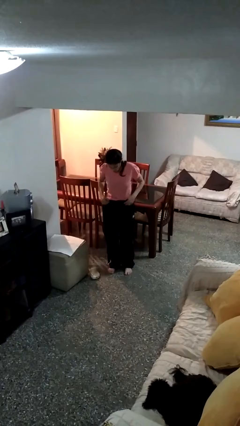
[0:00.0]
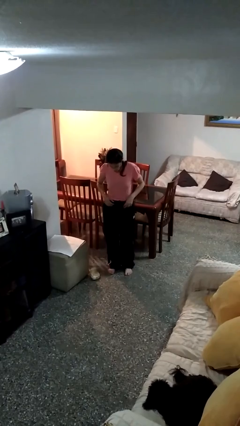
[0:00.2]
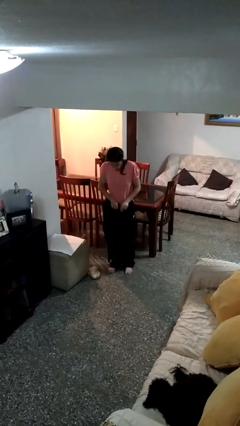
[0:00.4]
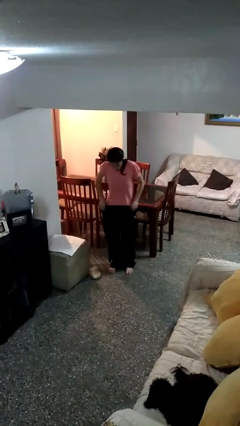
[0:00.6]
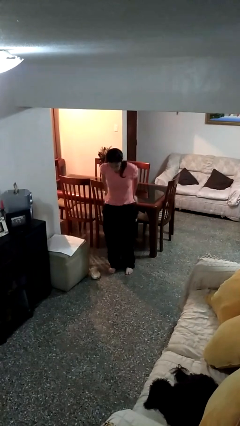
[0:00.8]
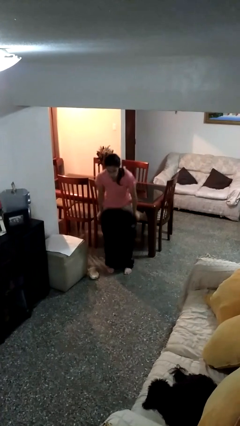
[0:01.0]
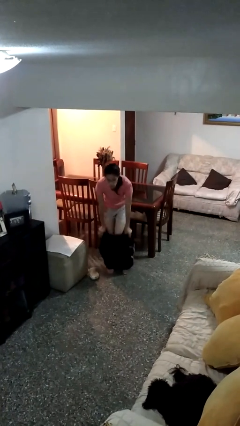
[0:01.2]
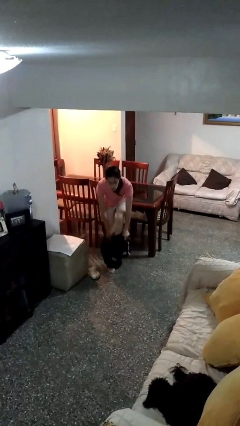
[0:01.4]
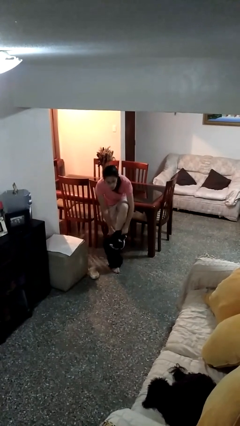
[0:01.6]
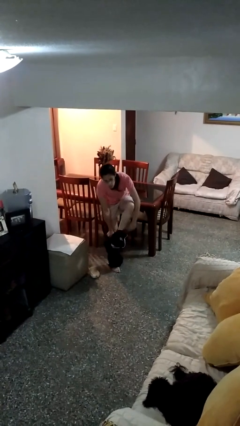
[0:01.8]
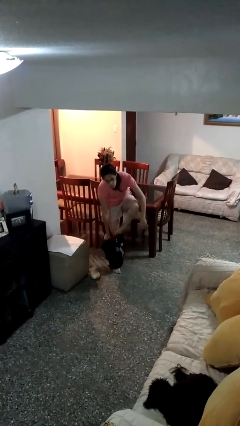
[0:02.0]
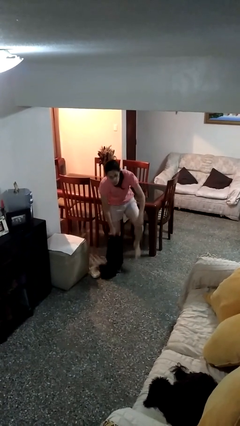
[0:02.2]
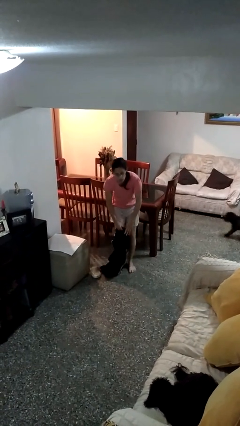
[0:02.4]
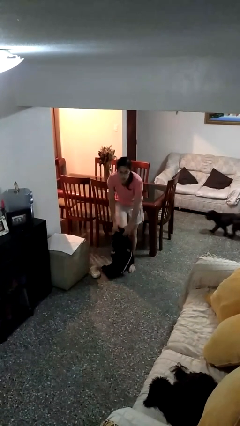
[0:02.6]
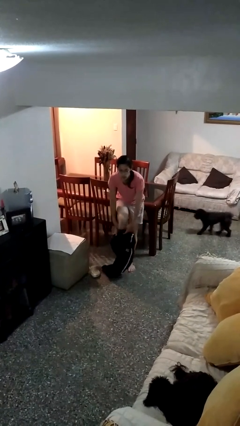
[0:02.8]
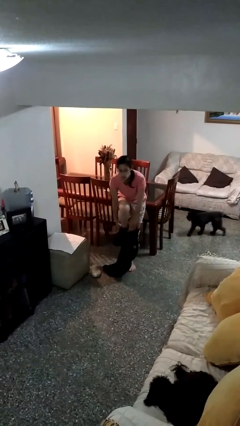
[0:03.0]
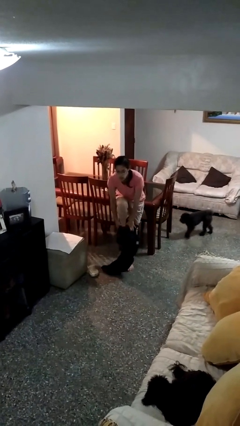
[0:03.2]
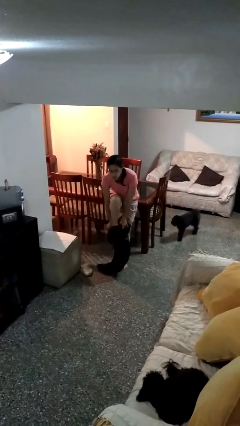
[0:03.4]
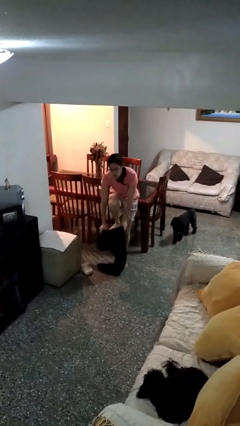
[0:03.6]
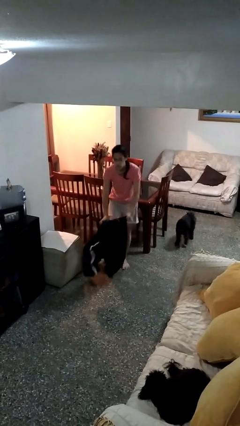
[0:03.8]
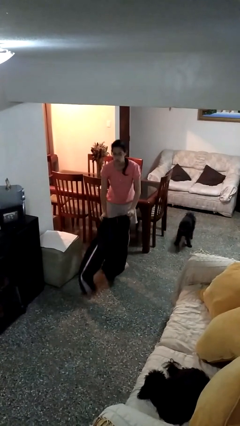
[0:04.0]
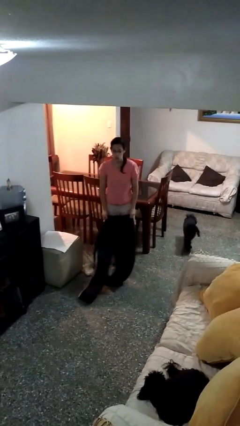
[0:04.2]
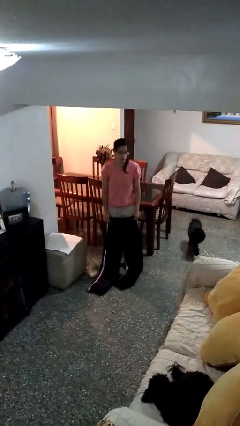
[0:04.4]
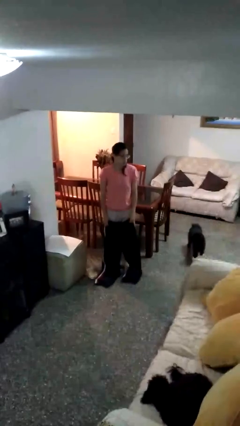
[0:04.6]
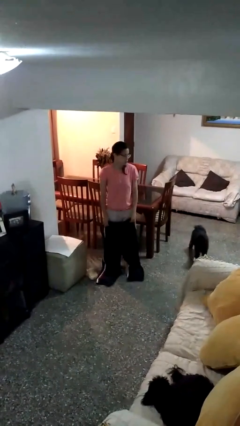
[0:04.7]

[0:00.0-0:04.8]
person puts on pants

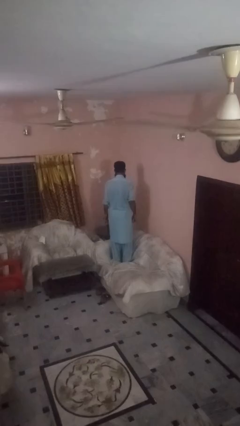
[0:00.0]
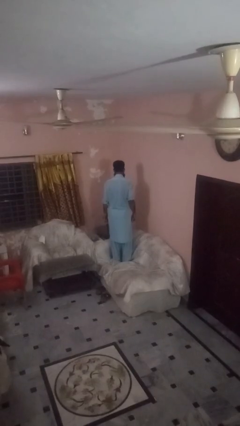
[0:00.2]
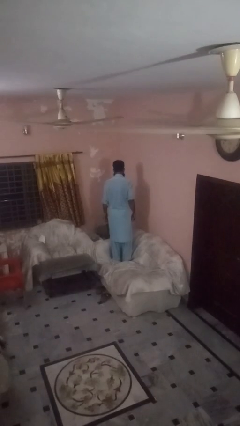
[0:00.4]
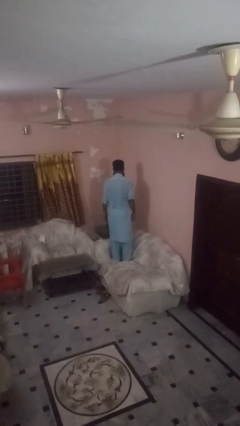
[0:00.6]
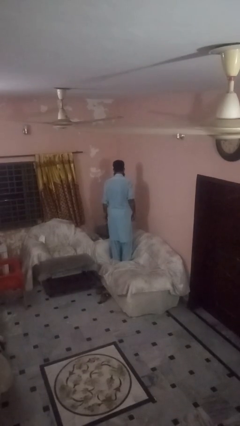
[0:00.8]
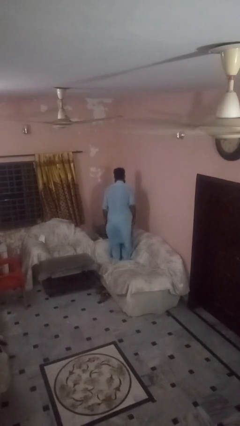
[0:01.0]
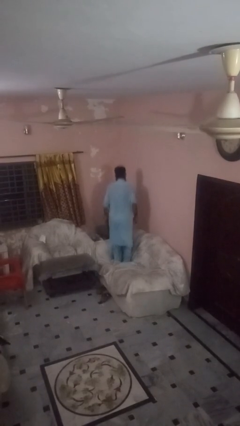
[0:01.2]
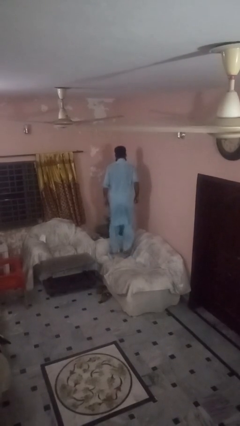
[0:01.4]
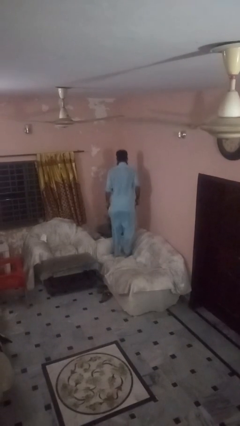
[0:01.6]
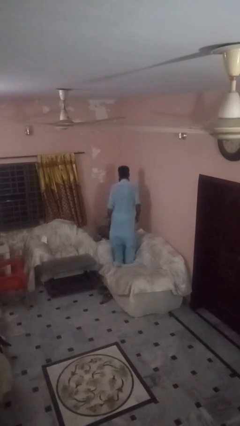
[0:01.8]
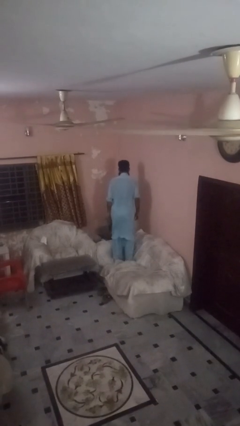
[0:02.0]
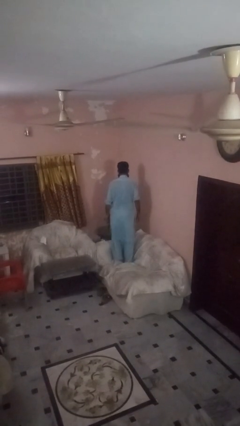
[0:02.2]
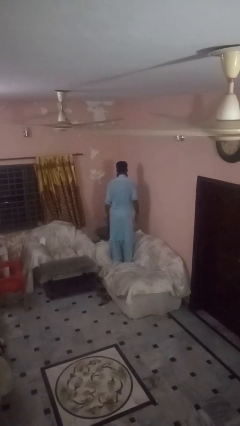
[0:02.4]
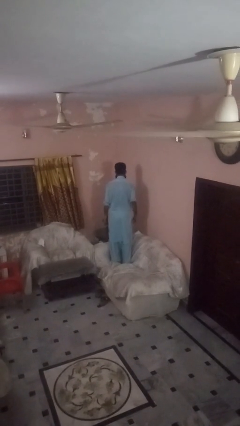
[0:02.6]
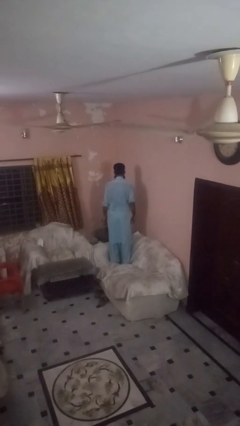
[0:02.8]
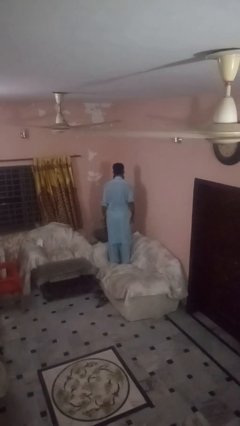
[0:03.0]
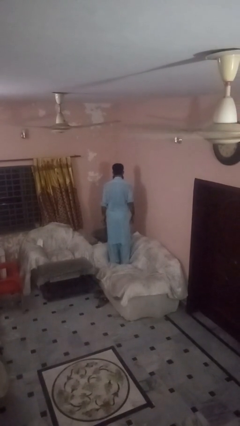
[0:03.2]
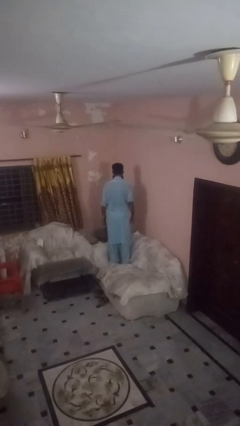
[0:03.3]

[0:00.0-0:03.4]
person jumps on couch

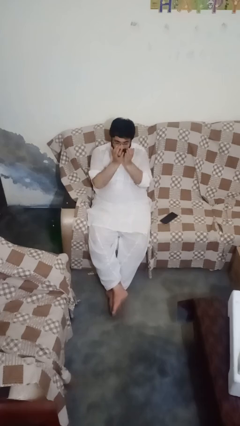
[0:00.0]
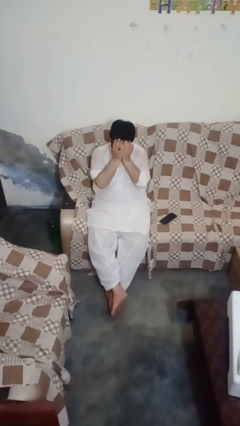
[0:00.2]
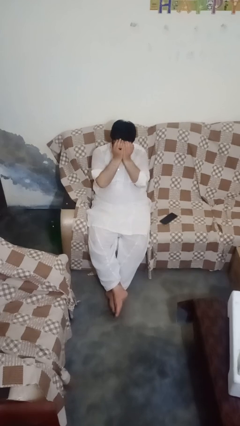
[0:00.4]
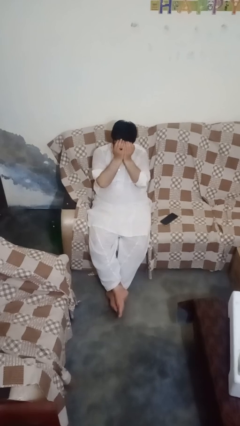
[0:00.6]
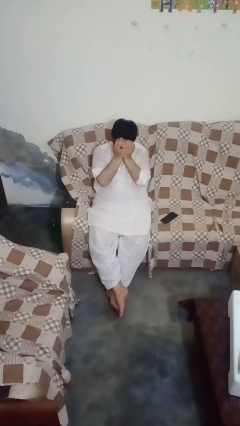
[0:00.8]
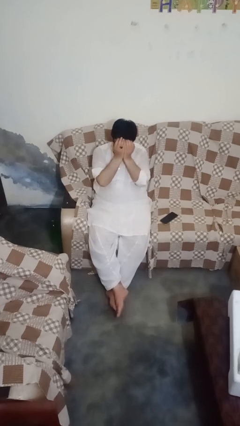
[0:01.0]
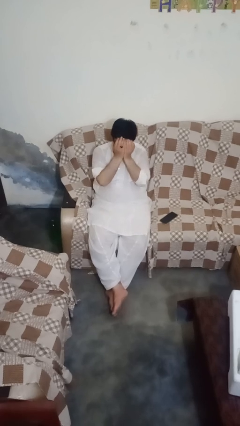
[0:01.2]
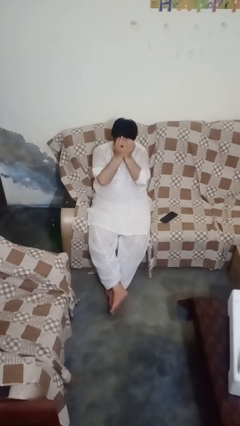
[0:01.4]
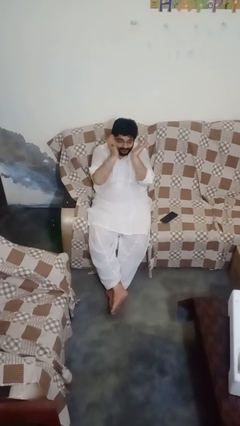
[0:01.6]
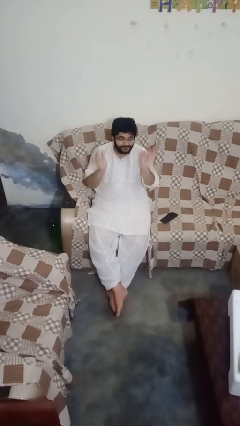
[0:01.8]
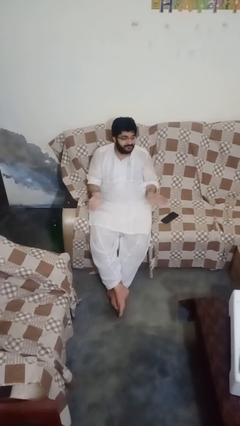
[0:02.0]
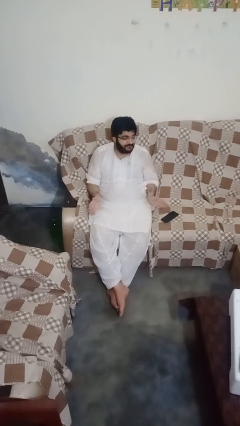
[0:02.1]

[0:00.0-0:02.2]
person covers face with hands

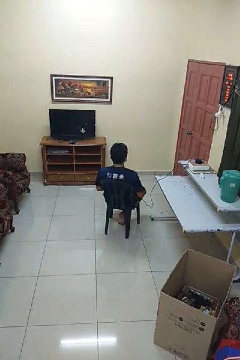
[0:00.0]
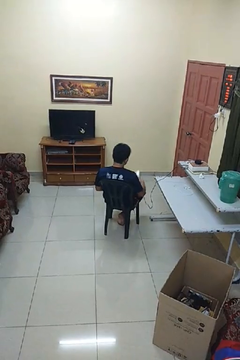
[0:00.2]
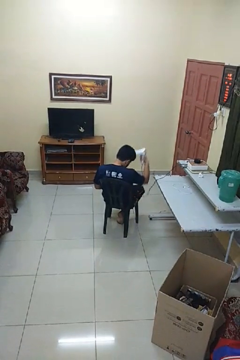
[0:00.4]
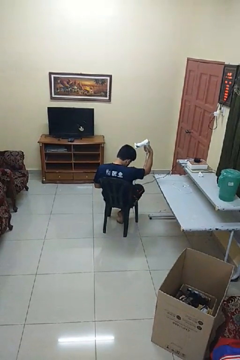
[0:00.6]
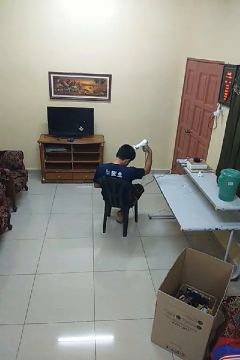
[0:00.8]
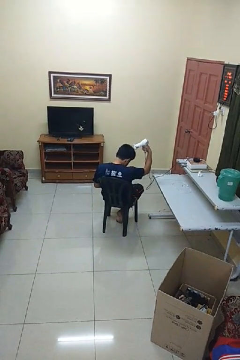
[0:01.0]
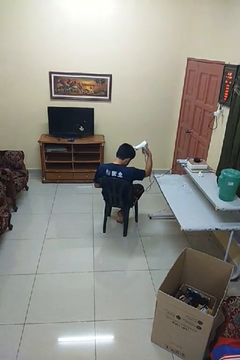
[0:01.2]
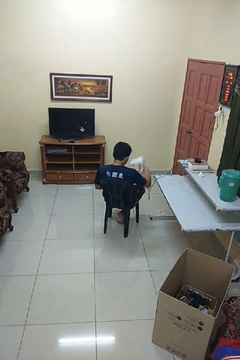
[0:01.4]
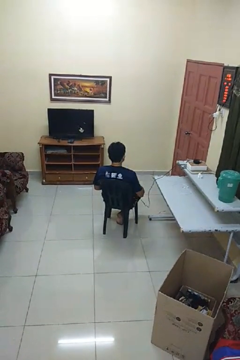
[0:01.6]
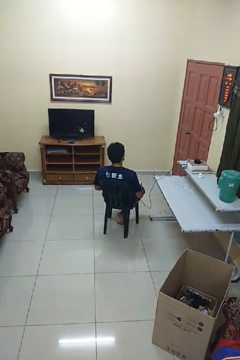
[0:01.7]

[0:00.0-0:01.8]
person dries hair with hairdryer

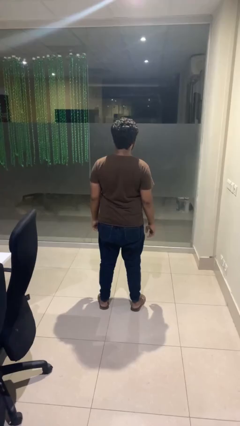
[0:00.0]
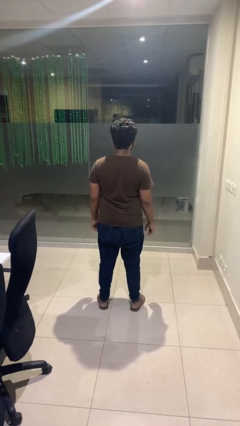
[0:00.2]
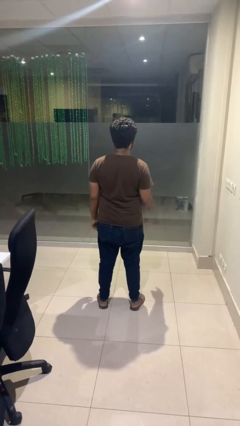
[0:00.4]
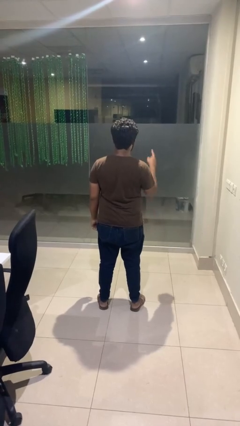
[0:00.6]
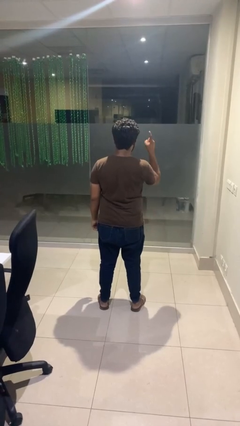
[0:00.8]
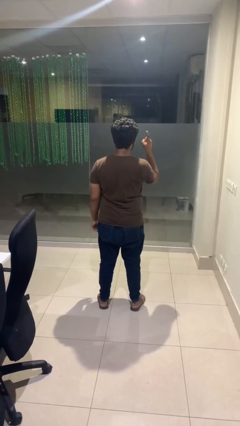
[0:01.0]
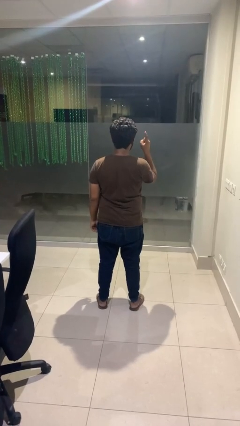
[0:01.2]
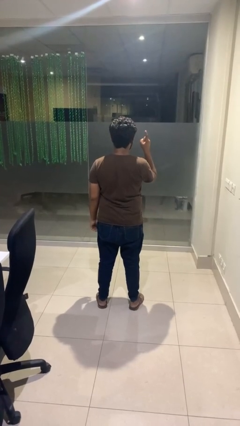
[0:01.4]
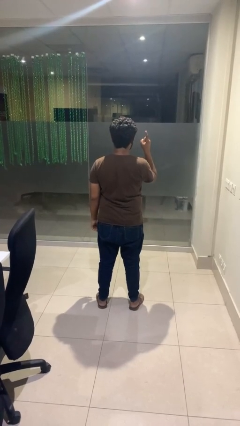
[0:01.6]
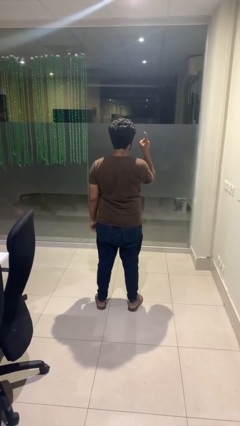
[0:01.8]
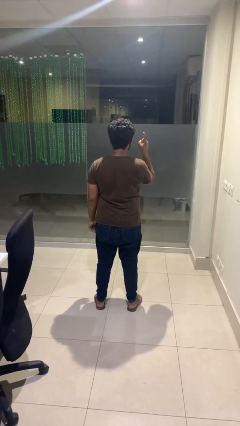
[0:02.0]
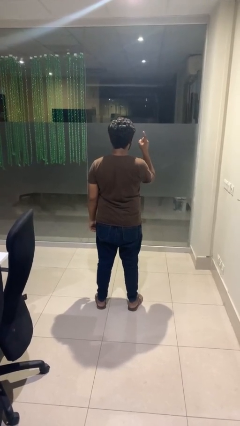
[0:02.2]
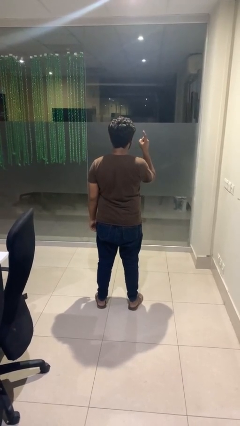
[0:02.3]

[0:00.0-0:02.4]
person gestures number one

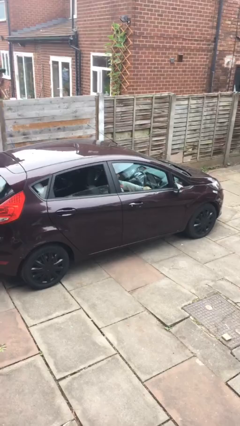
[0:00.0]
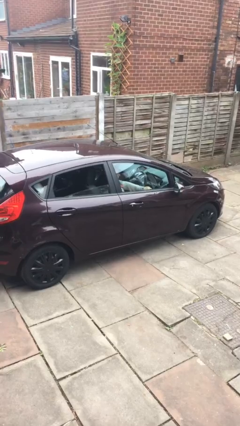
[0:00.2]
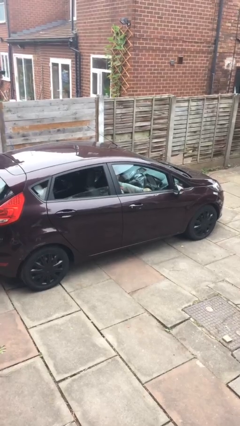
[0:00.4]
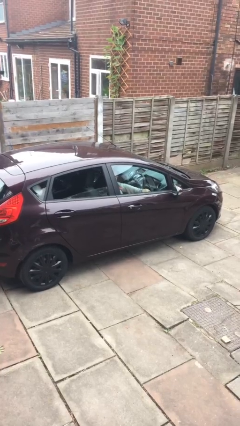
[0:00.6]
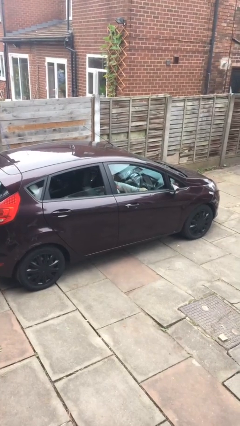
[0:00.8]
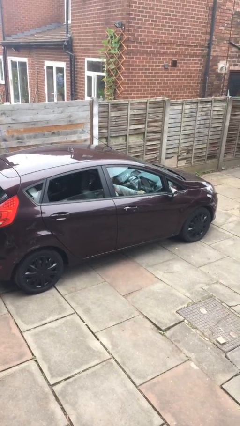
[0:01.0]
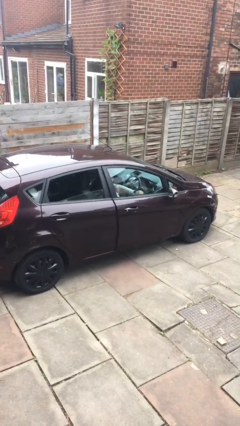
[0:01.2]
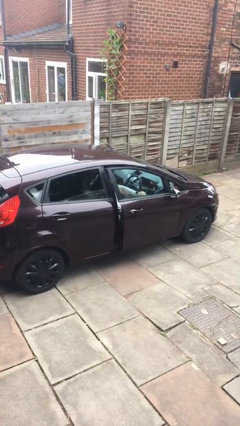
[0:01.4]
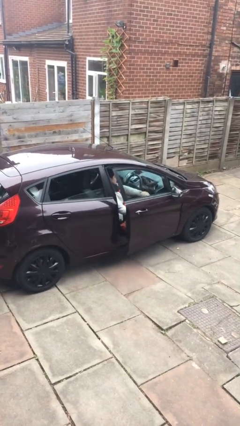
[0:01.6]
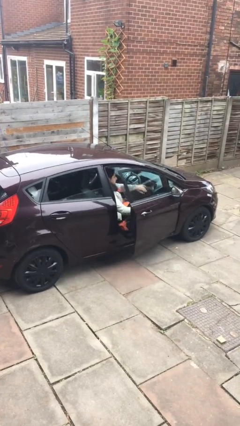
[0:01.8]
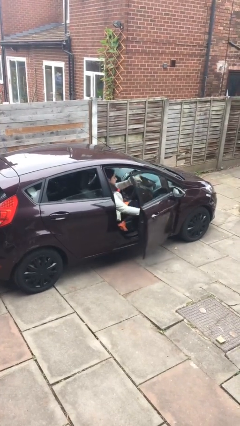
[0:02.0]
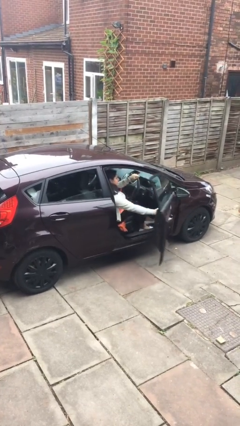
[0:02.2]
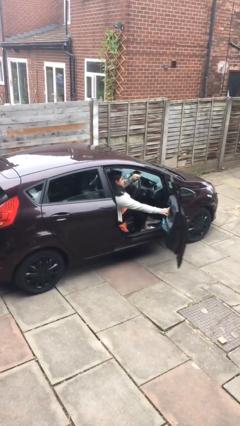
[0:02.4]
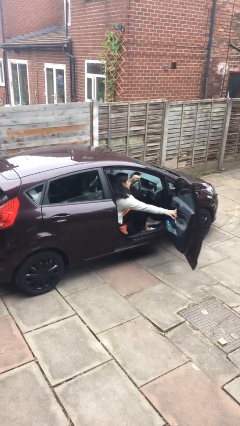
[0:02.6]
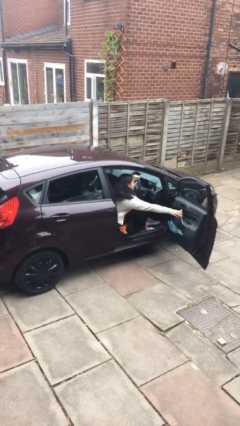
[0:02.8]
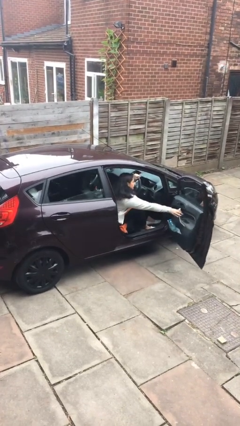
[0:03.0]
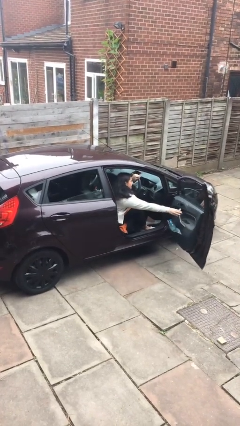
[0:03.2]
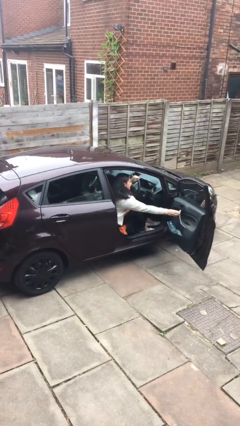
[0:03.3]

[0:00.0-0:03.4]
person opens car door
